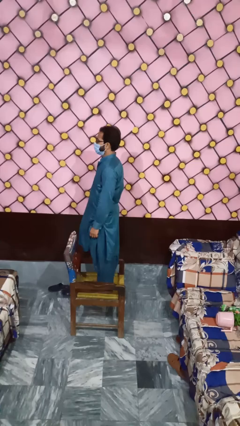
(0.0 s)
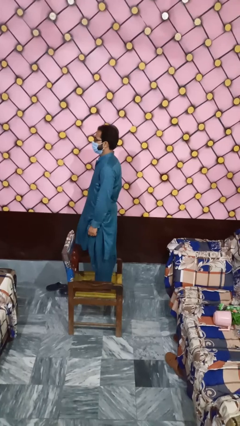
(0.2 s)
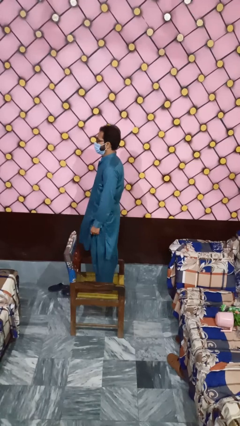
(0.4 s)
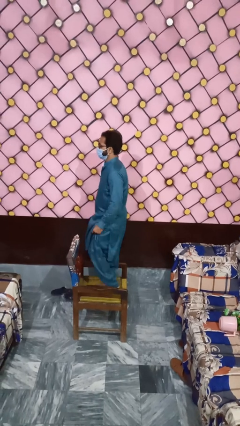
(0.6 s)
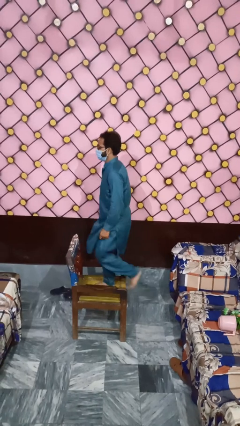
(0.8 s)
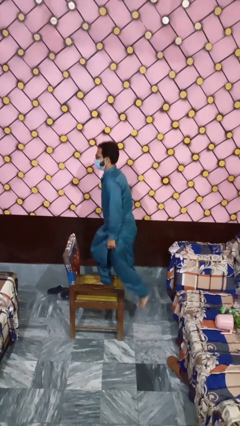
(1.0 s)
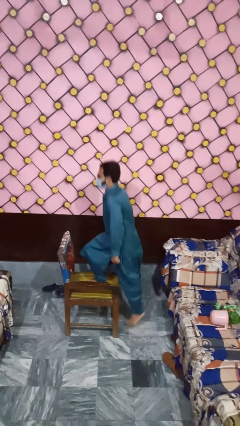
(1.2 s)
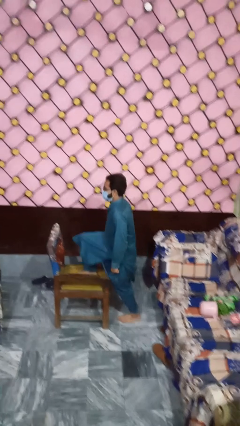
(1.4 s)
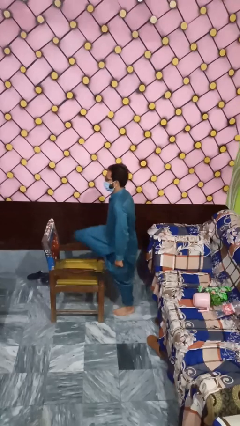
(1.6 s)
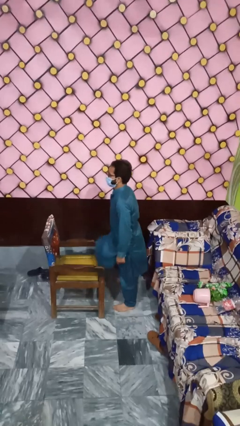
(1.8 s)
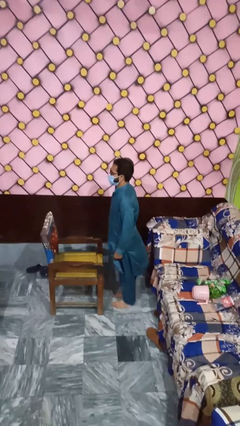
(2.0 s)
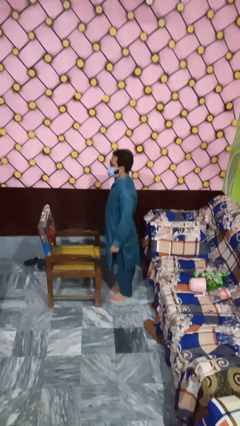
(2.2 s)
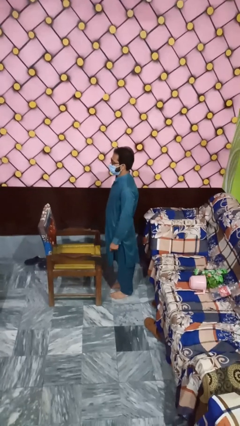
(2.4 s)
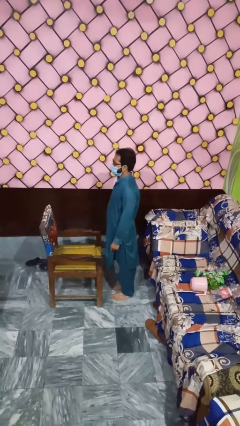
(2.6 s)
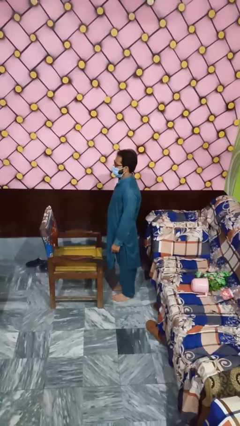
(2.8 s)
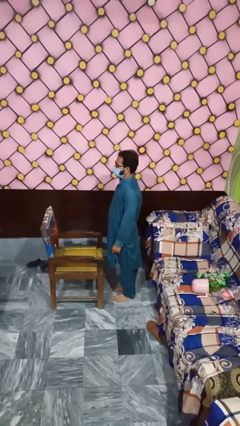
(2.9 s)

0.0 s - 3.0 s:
person climbs off chair

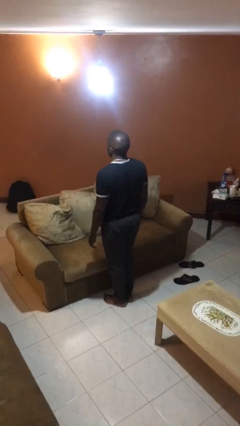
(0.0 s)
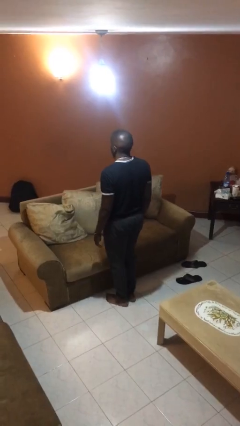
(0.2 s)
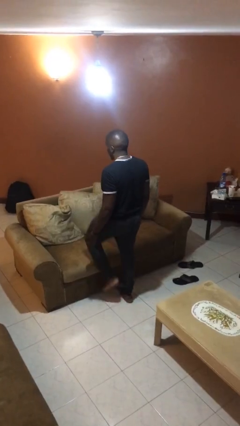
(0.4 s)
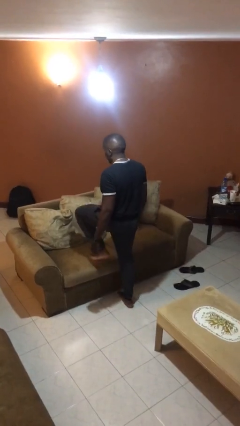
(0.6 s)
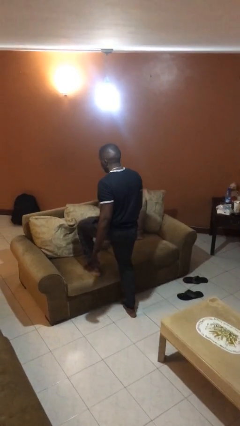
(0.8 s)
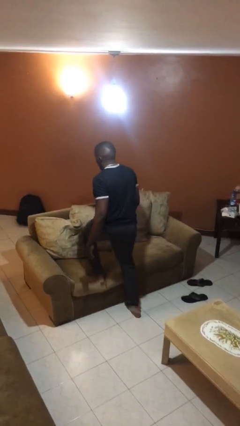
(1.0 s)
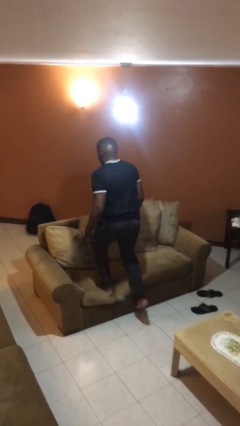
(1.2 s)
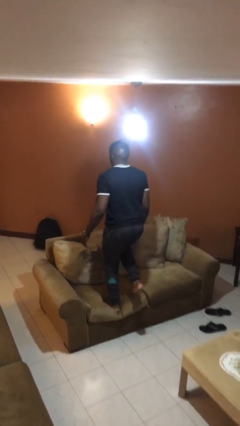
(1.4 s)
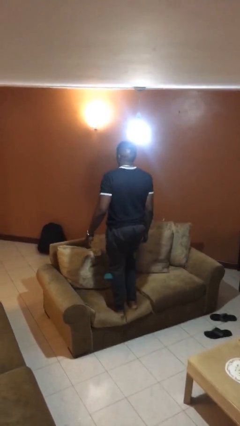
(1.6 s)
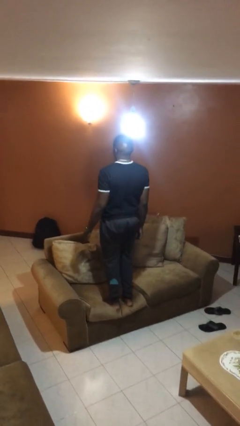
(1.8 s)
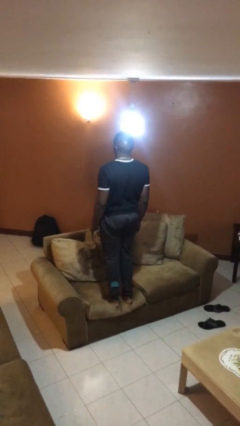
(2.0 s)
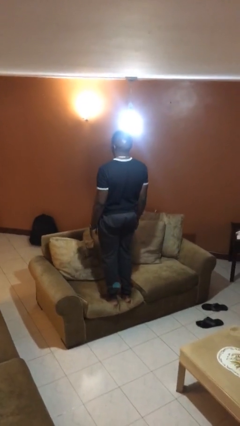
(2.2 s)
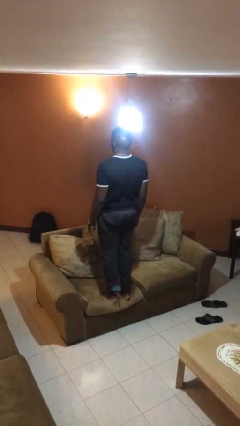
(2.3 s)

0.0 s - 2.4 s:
person climbs on couch

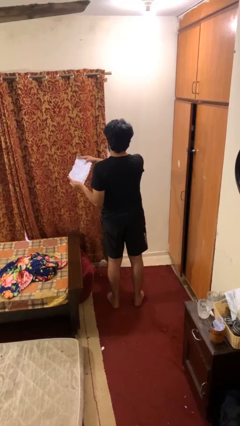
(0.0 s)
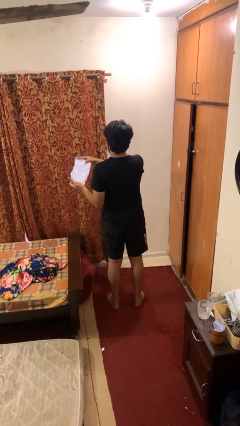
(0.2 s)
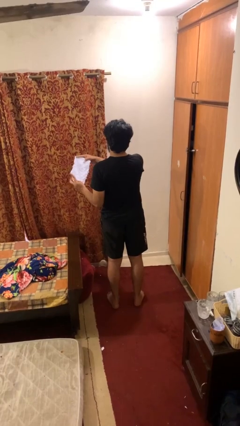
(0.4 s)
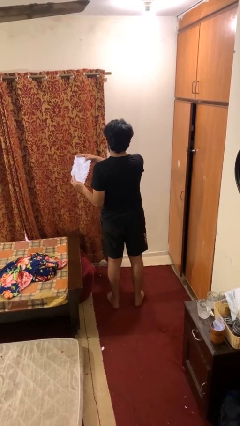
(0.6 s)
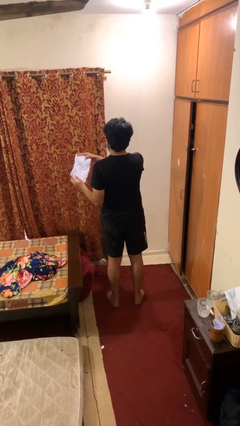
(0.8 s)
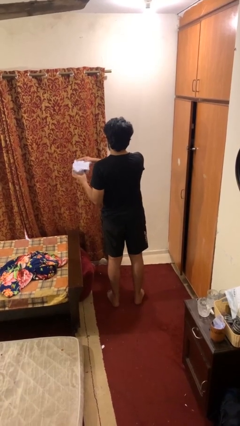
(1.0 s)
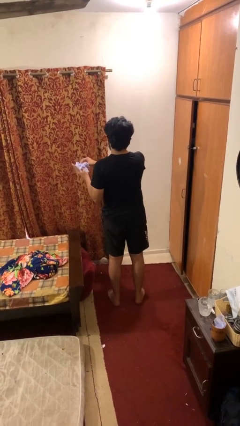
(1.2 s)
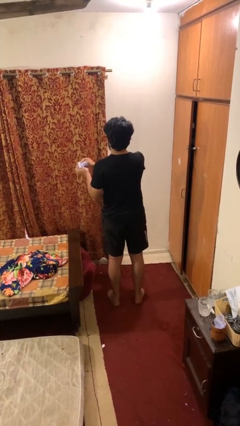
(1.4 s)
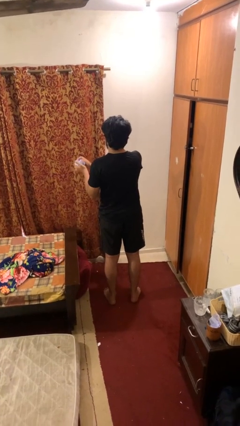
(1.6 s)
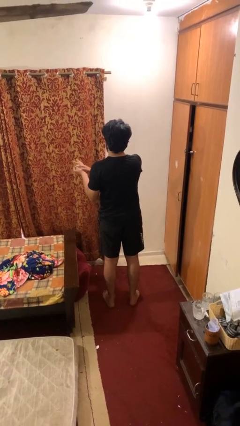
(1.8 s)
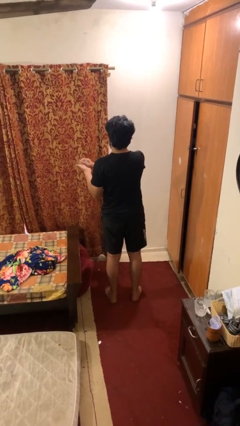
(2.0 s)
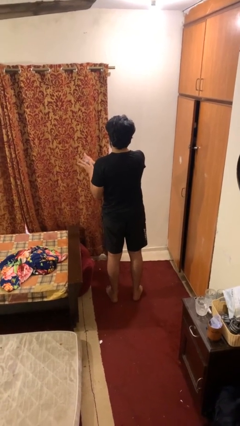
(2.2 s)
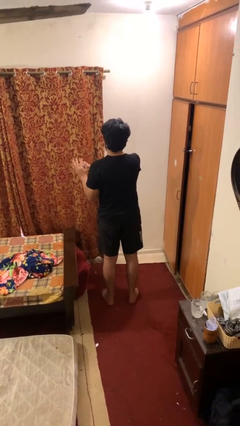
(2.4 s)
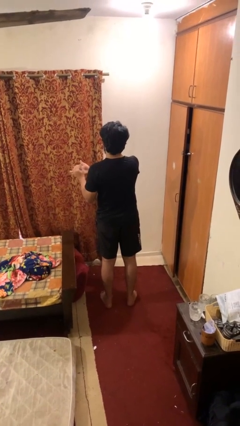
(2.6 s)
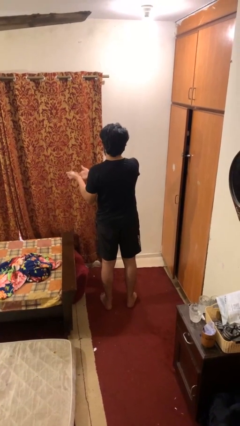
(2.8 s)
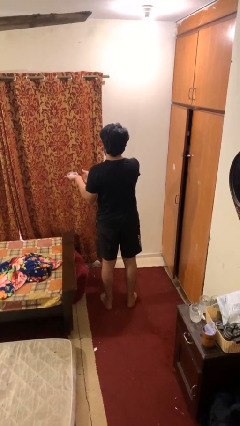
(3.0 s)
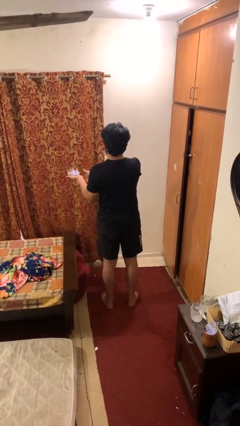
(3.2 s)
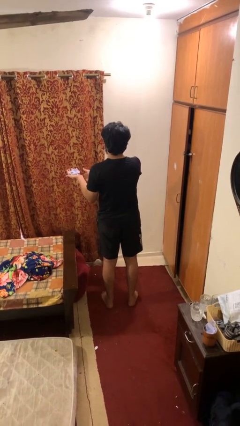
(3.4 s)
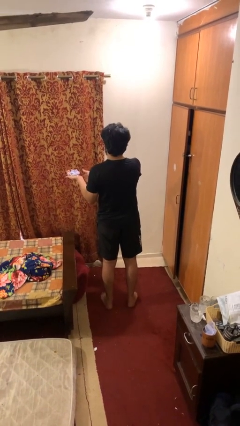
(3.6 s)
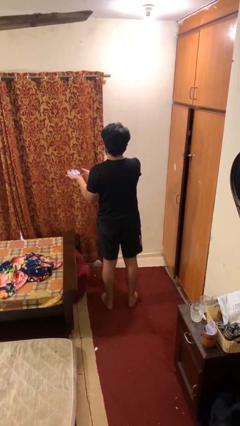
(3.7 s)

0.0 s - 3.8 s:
person crumples paper

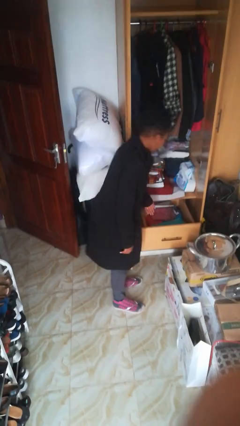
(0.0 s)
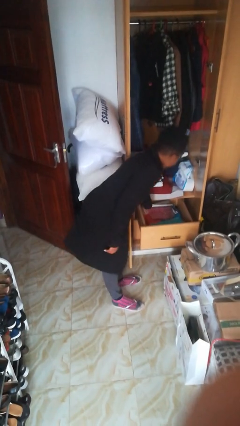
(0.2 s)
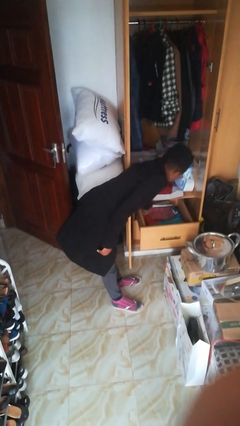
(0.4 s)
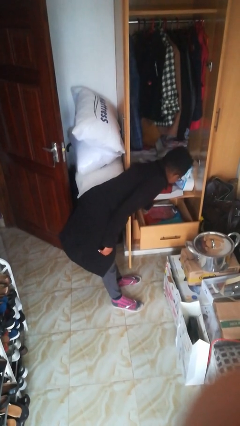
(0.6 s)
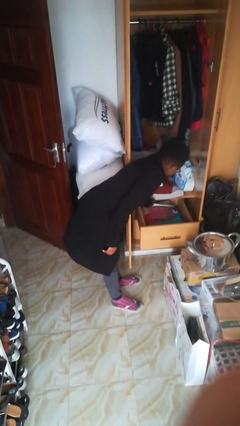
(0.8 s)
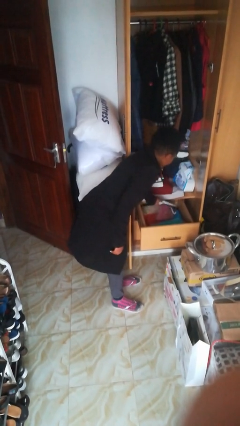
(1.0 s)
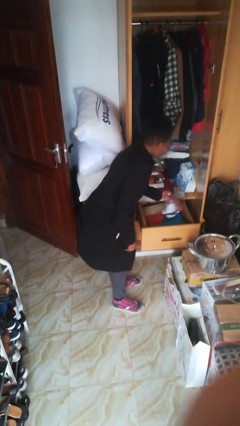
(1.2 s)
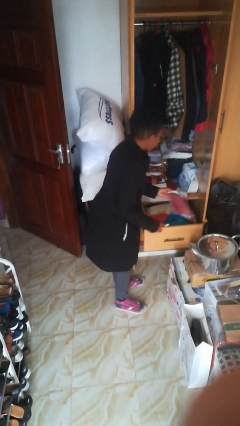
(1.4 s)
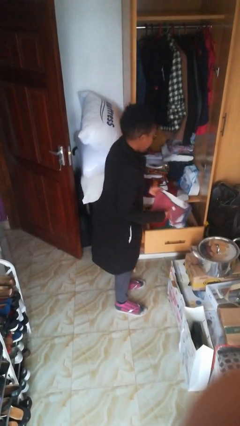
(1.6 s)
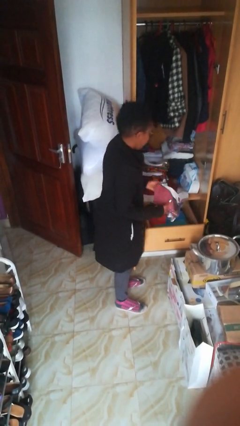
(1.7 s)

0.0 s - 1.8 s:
person takes clothes from dresser

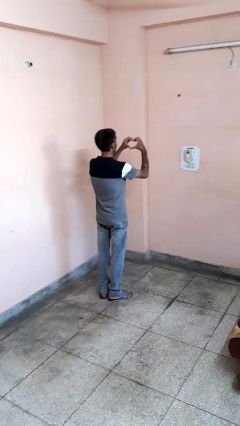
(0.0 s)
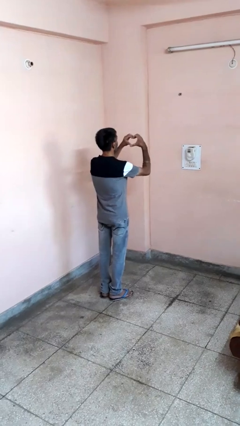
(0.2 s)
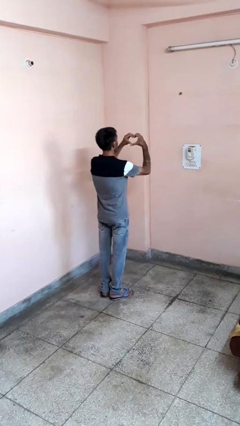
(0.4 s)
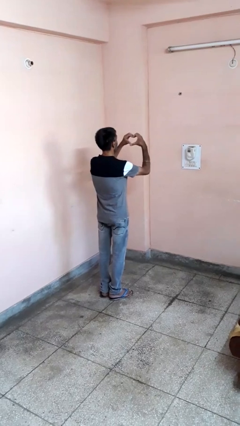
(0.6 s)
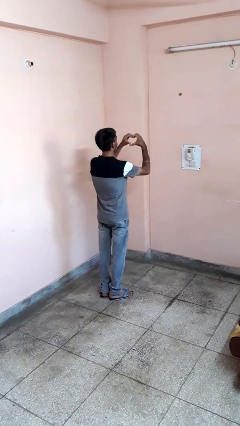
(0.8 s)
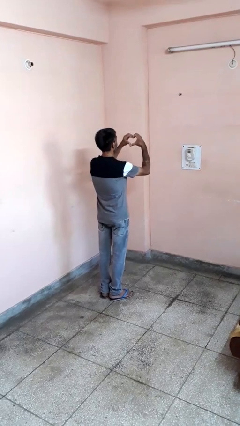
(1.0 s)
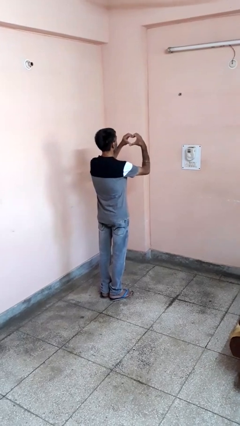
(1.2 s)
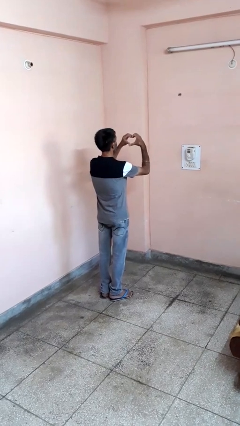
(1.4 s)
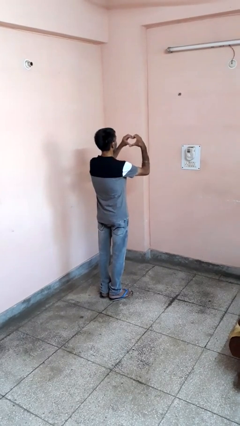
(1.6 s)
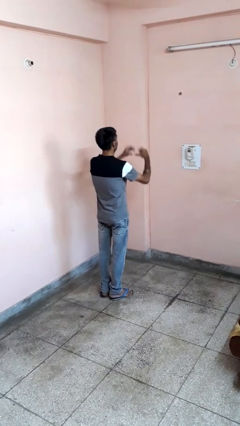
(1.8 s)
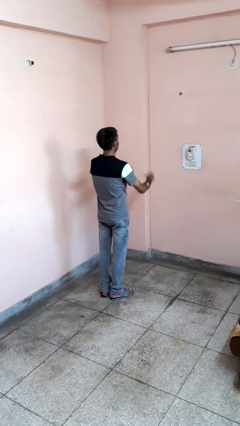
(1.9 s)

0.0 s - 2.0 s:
person gestures heart

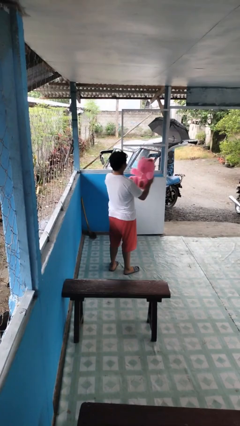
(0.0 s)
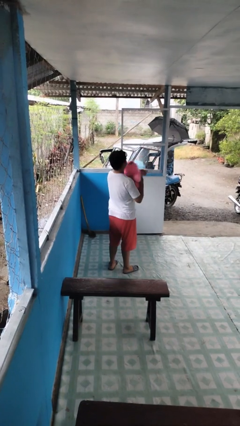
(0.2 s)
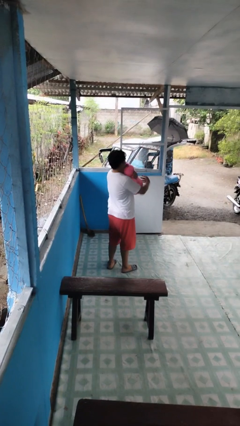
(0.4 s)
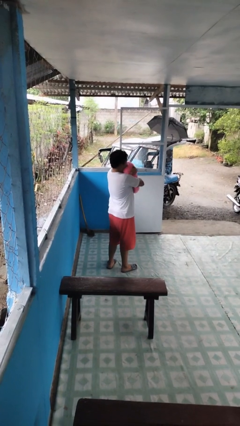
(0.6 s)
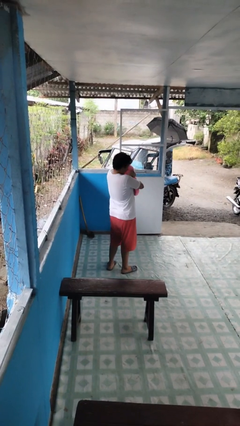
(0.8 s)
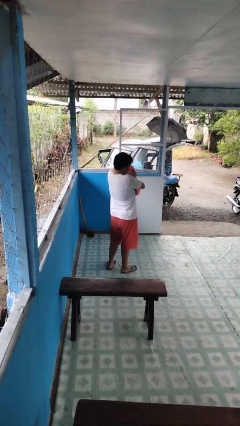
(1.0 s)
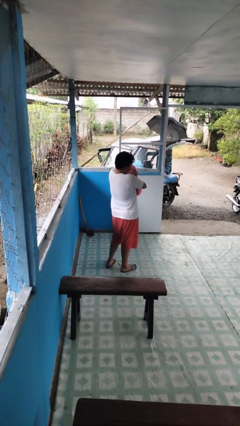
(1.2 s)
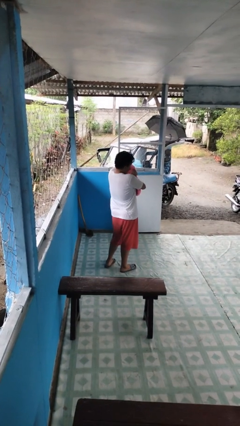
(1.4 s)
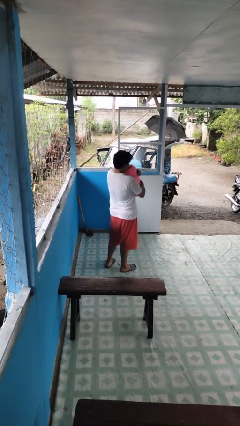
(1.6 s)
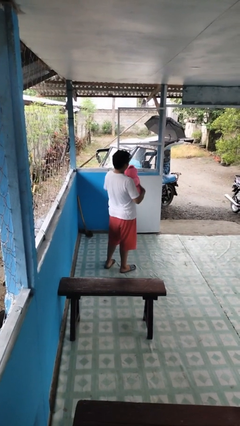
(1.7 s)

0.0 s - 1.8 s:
person hugs stuffed animal

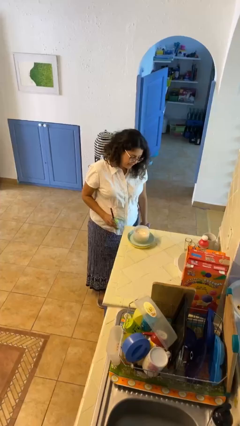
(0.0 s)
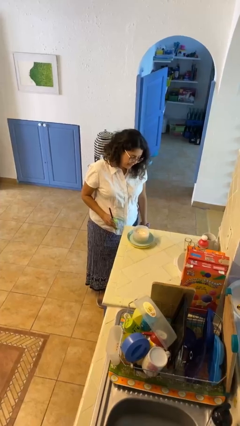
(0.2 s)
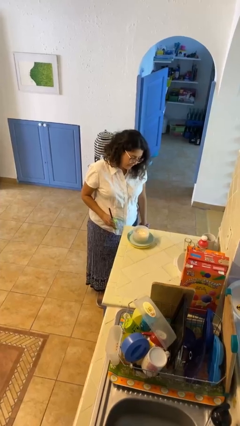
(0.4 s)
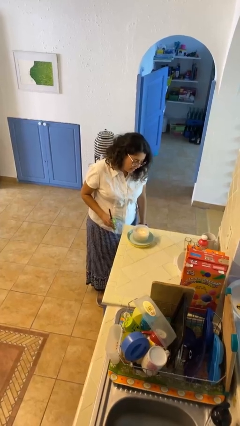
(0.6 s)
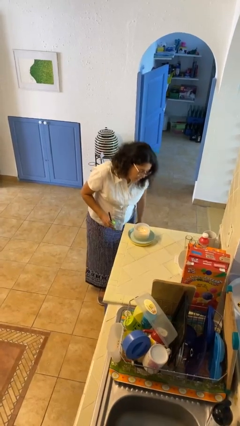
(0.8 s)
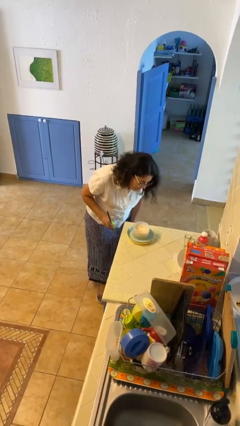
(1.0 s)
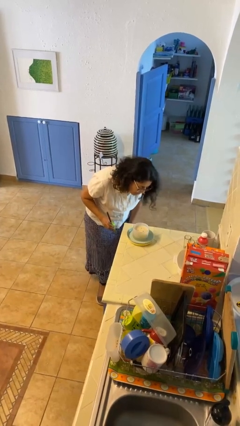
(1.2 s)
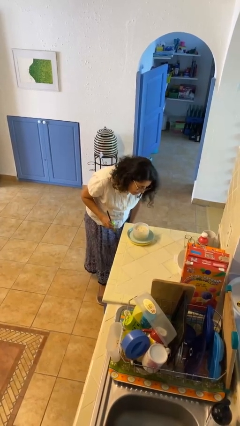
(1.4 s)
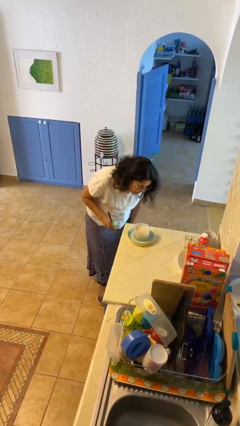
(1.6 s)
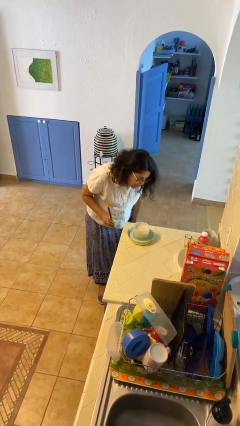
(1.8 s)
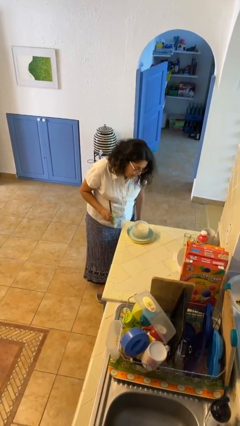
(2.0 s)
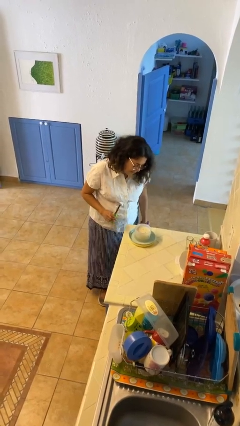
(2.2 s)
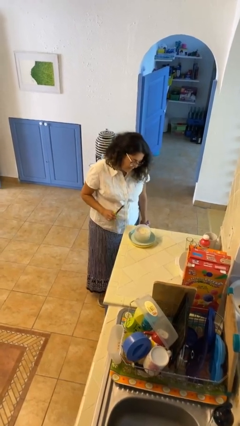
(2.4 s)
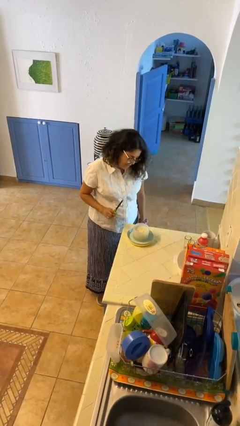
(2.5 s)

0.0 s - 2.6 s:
person extinguishes candle
